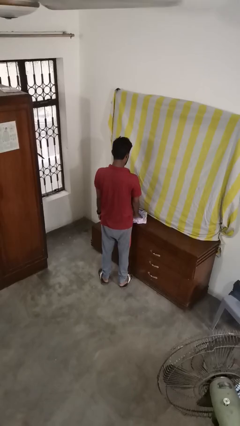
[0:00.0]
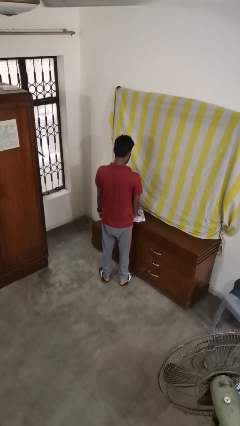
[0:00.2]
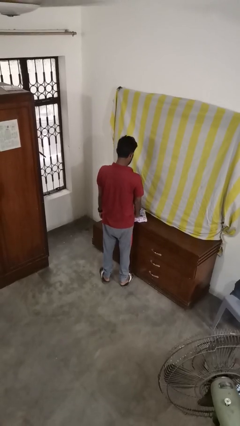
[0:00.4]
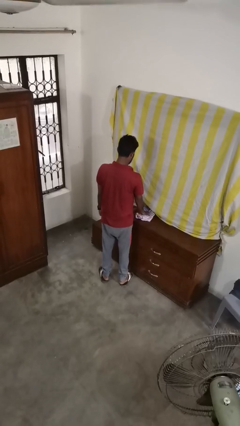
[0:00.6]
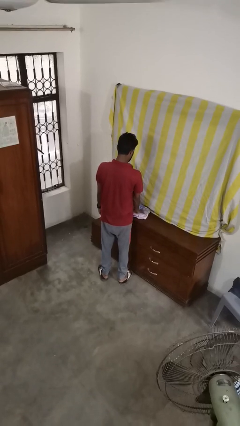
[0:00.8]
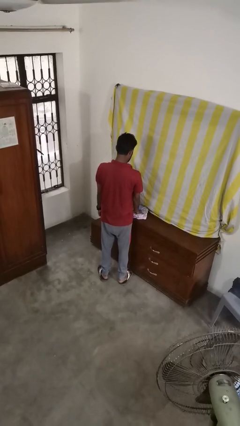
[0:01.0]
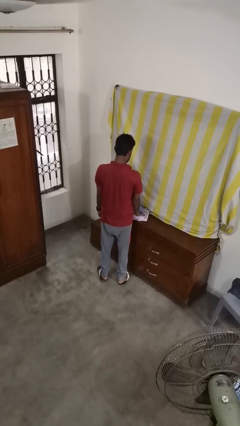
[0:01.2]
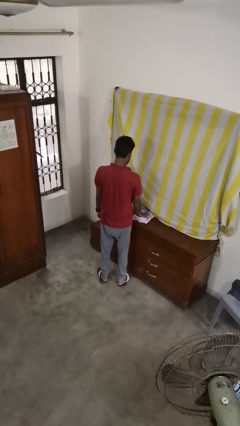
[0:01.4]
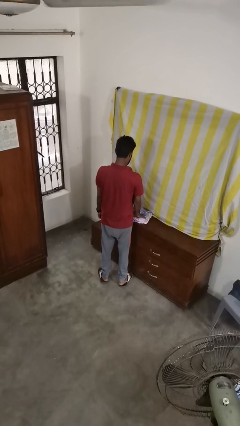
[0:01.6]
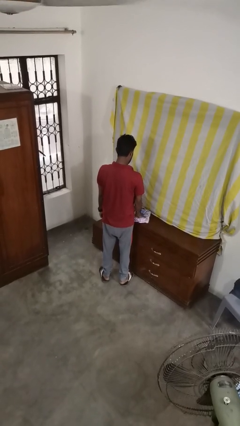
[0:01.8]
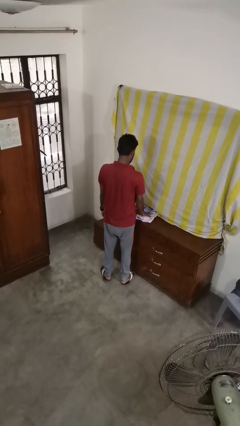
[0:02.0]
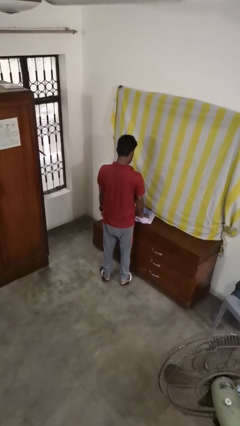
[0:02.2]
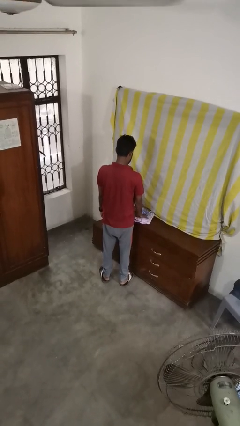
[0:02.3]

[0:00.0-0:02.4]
person cleans table with rag

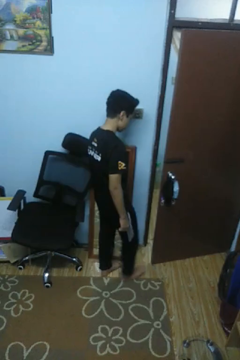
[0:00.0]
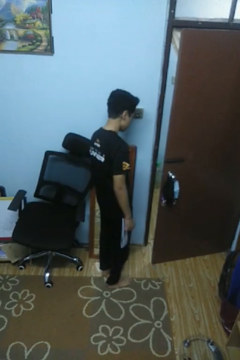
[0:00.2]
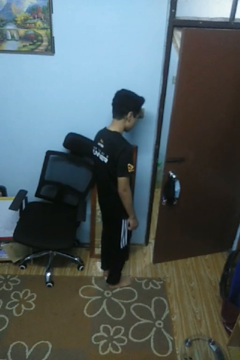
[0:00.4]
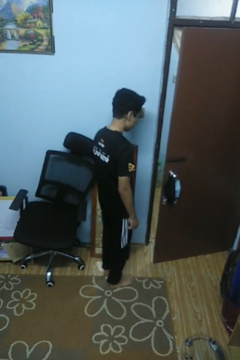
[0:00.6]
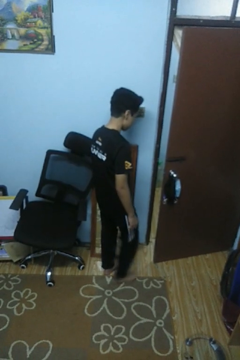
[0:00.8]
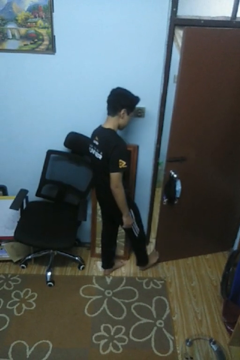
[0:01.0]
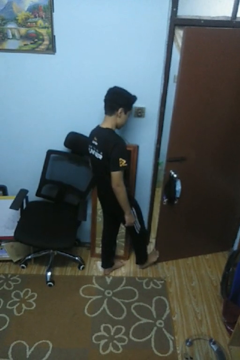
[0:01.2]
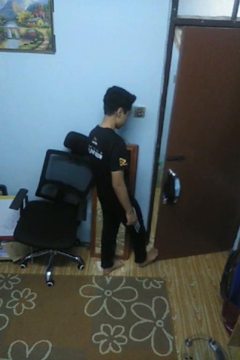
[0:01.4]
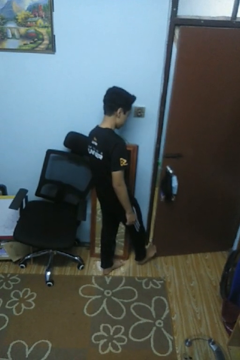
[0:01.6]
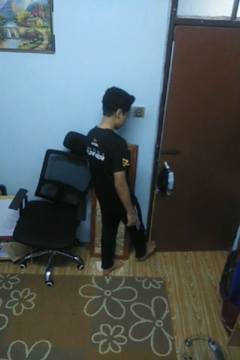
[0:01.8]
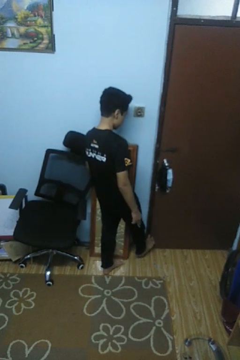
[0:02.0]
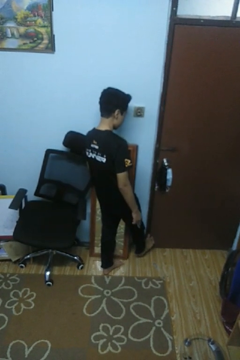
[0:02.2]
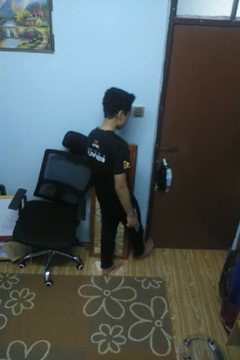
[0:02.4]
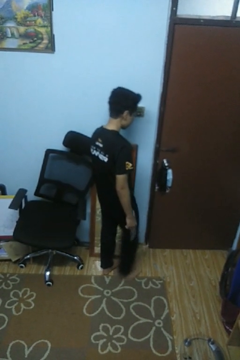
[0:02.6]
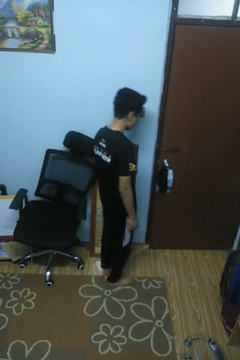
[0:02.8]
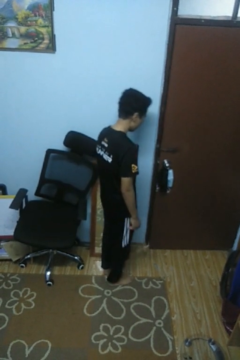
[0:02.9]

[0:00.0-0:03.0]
person closes door with foot

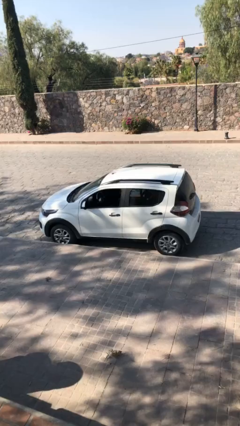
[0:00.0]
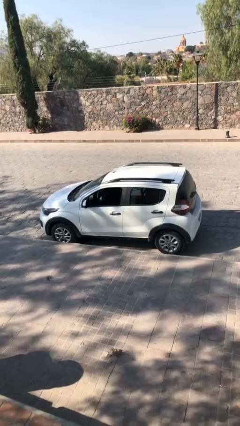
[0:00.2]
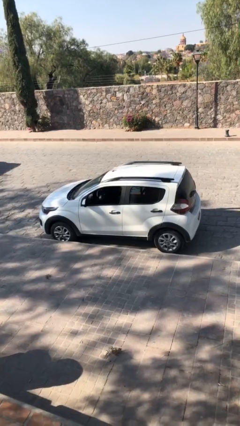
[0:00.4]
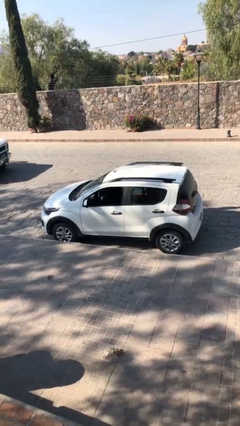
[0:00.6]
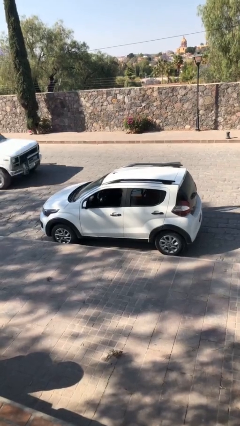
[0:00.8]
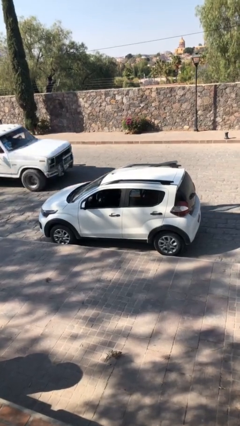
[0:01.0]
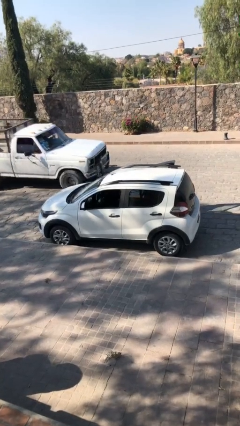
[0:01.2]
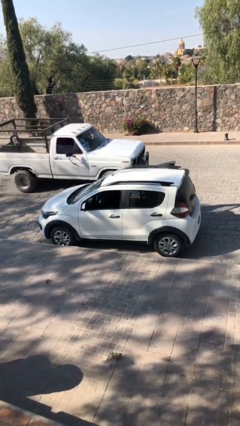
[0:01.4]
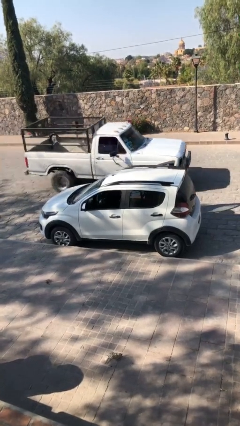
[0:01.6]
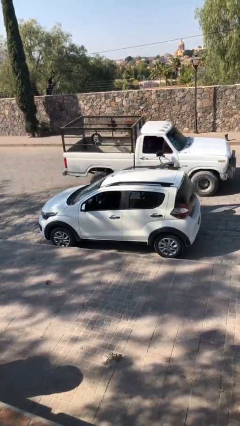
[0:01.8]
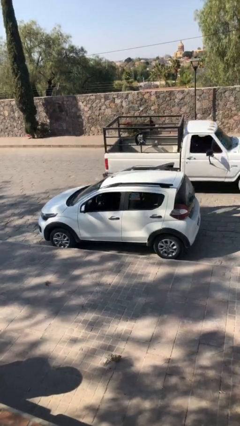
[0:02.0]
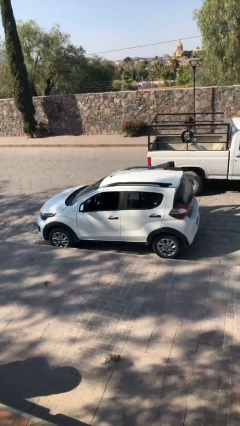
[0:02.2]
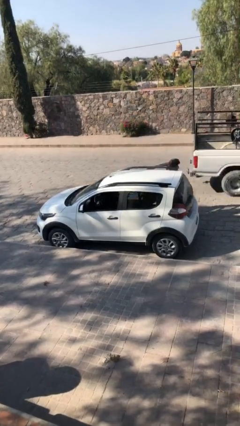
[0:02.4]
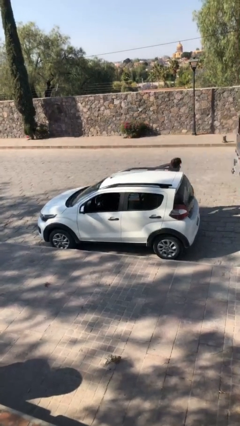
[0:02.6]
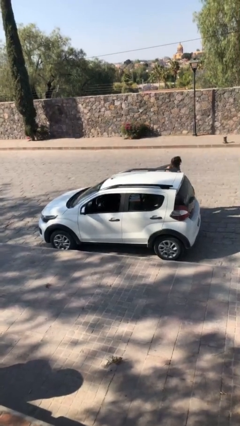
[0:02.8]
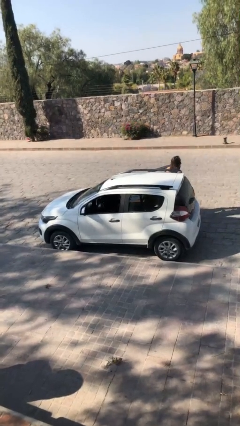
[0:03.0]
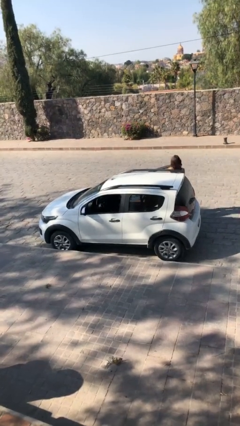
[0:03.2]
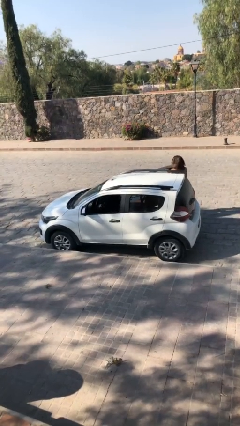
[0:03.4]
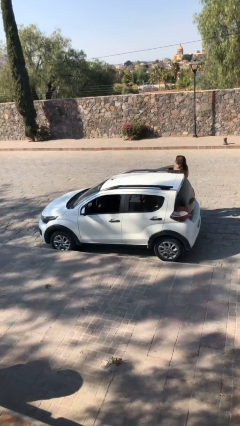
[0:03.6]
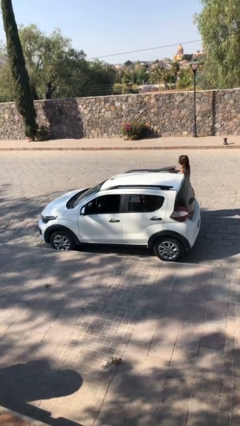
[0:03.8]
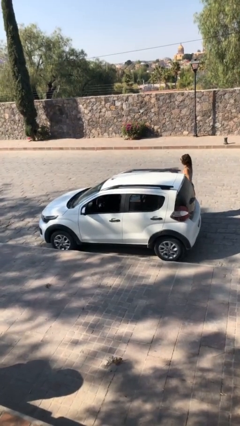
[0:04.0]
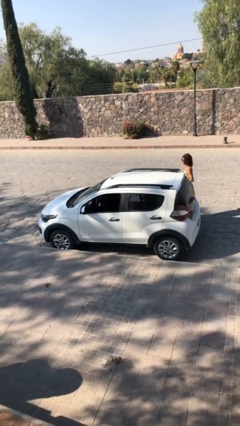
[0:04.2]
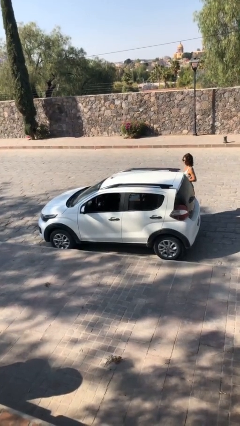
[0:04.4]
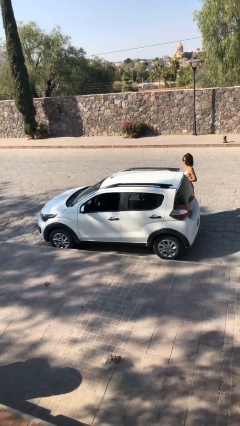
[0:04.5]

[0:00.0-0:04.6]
car drops off person

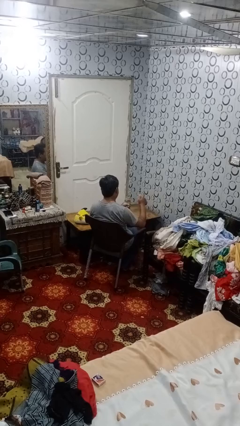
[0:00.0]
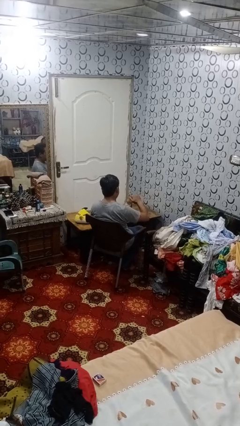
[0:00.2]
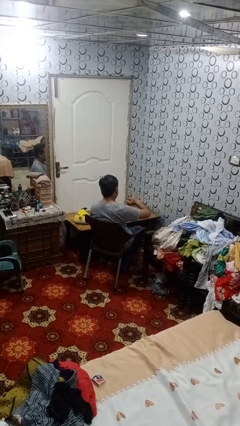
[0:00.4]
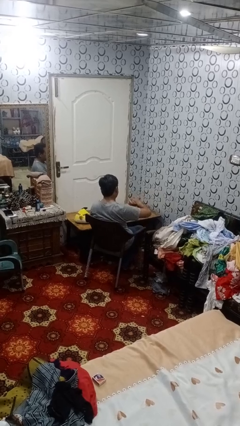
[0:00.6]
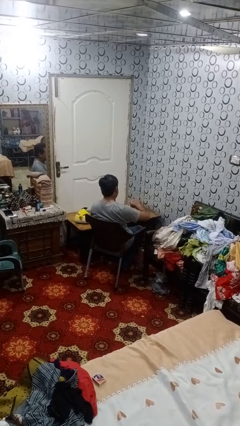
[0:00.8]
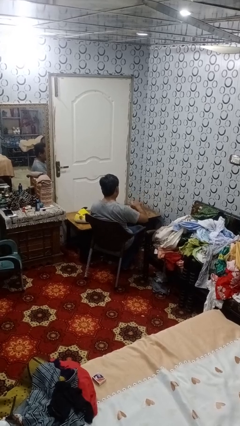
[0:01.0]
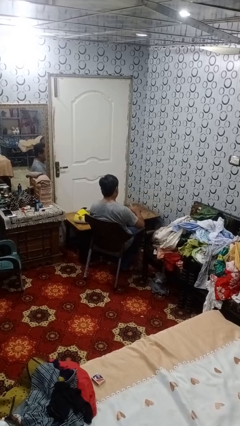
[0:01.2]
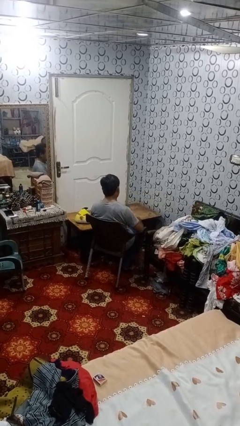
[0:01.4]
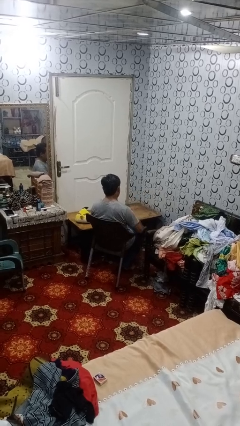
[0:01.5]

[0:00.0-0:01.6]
person closes jar

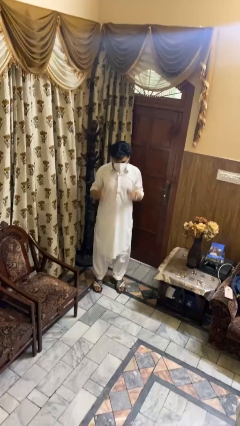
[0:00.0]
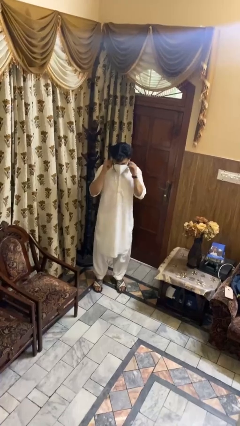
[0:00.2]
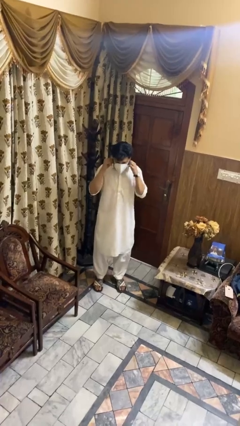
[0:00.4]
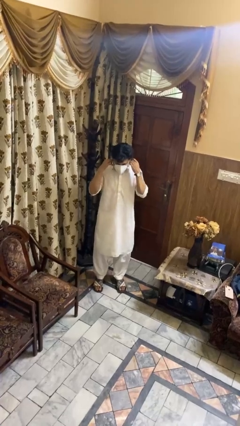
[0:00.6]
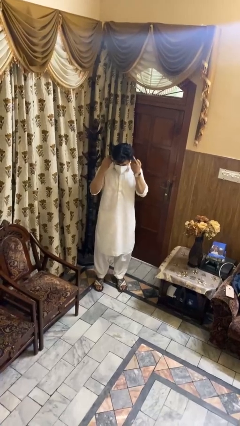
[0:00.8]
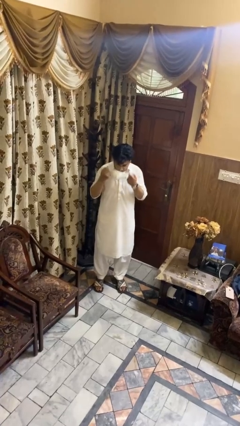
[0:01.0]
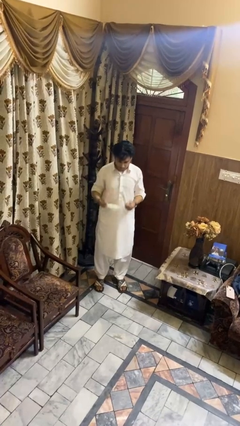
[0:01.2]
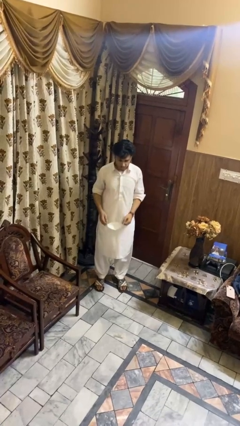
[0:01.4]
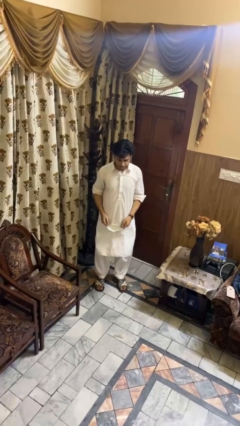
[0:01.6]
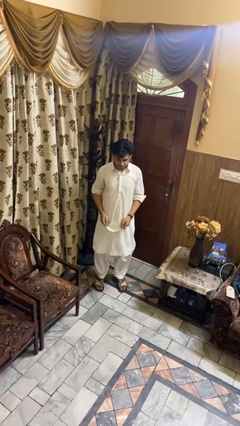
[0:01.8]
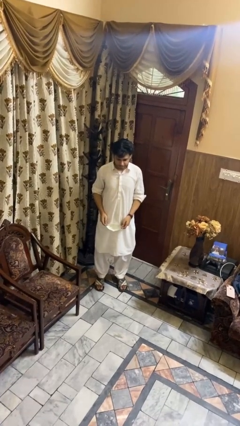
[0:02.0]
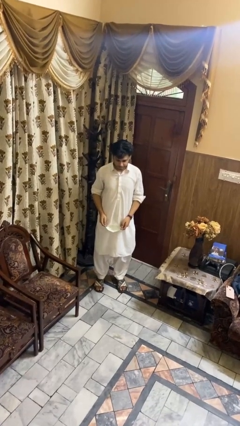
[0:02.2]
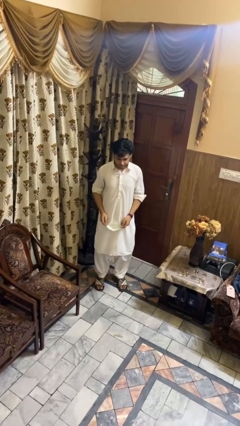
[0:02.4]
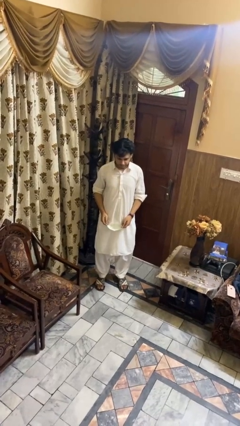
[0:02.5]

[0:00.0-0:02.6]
person takes off facemask

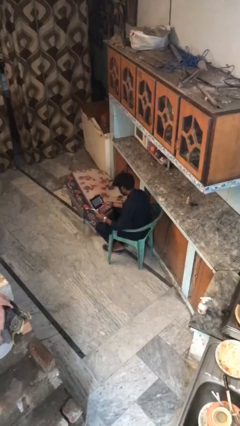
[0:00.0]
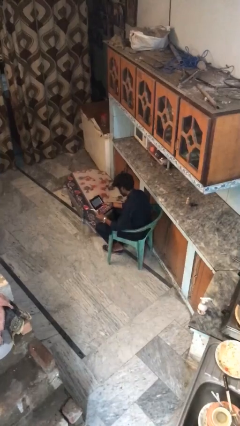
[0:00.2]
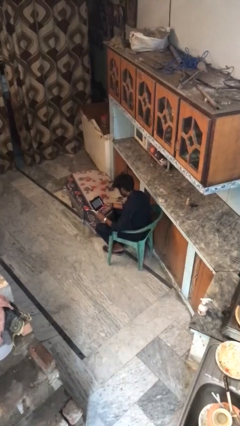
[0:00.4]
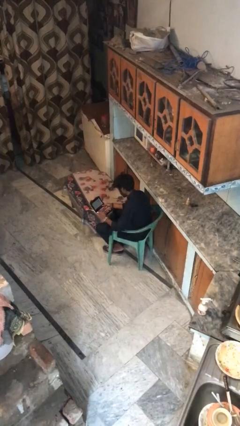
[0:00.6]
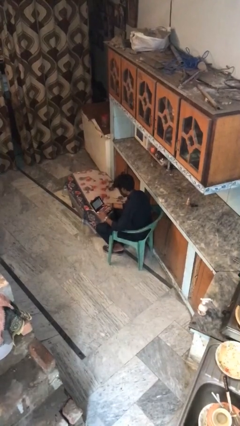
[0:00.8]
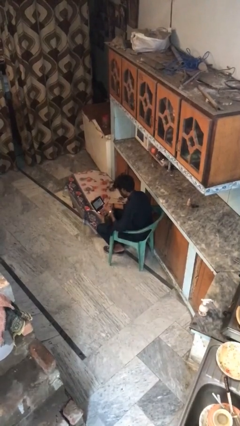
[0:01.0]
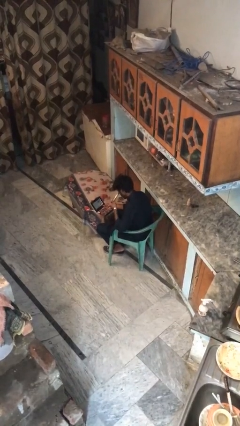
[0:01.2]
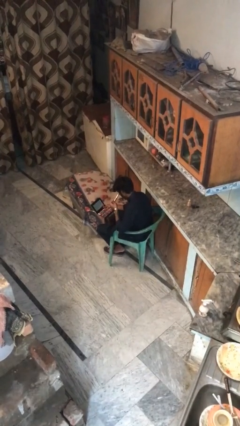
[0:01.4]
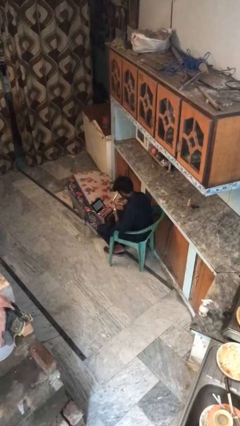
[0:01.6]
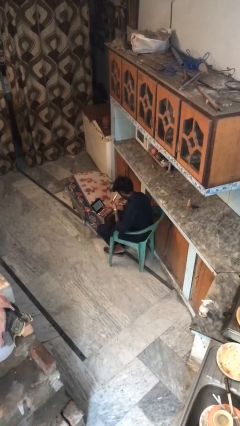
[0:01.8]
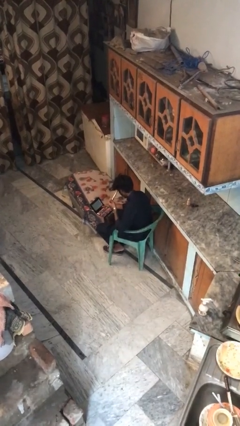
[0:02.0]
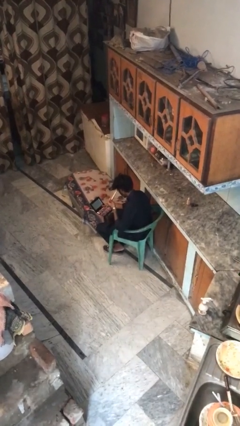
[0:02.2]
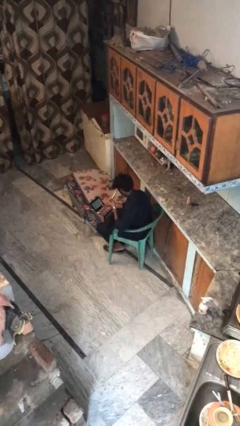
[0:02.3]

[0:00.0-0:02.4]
person applies eye makeup

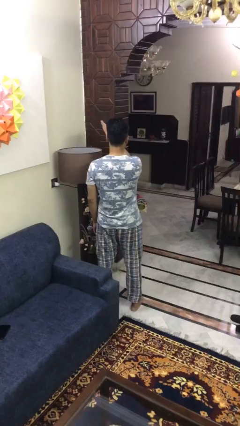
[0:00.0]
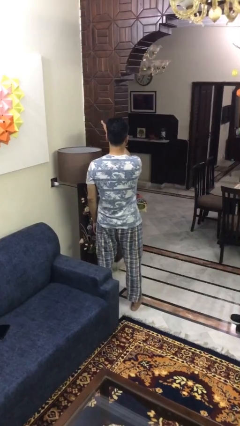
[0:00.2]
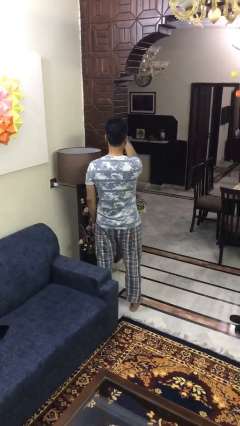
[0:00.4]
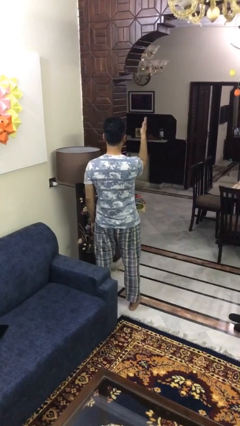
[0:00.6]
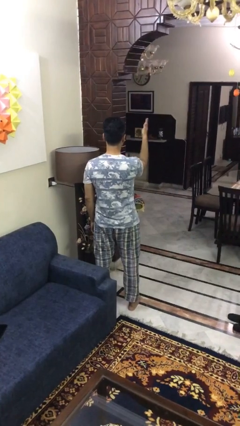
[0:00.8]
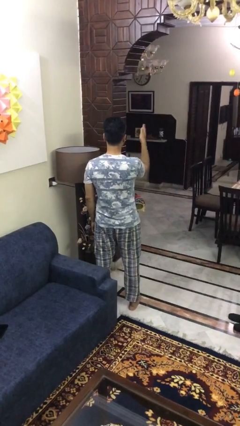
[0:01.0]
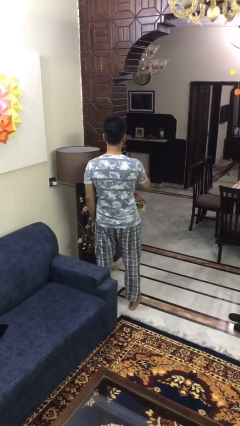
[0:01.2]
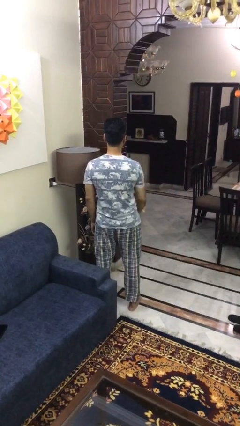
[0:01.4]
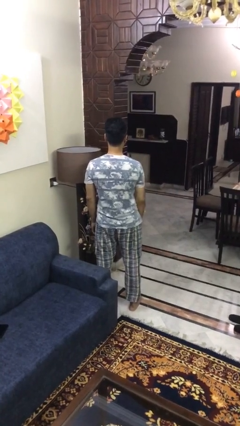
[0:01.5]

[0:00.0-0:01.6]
person gestures swipe right
